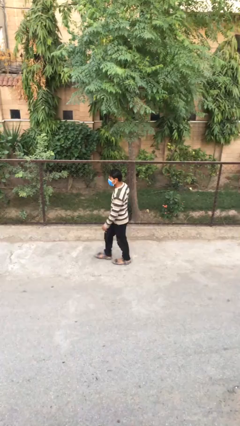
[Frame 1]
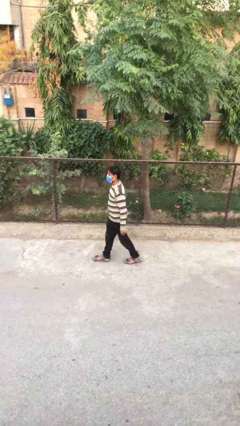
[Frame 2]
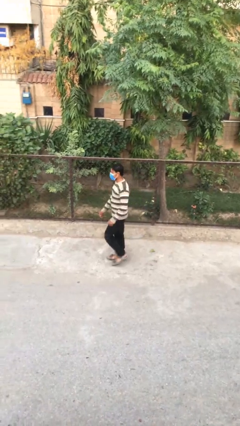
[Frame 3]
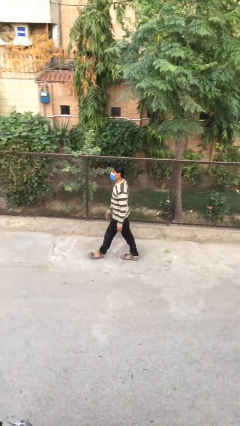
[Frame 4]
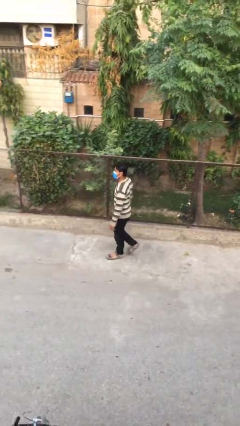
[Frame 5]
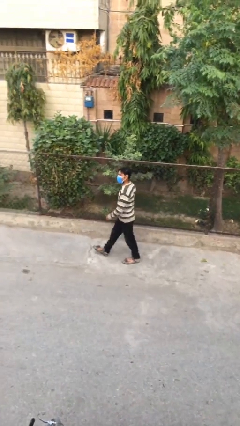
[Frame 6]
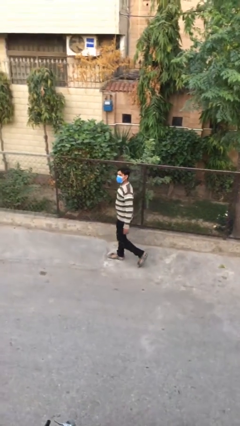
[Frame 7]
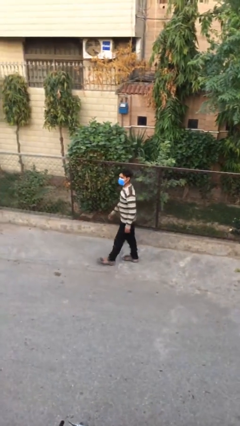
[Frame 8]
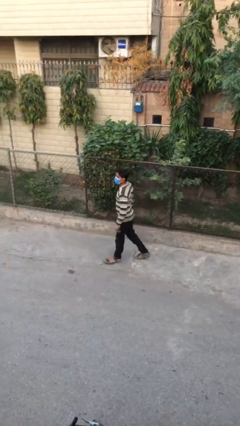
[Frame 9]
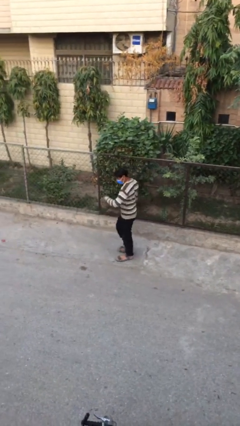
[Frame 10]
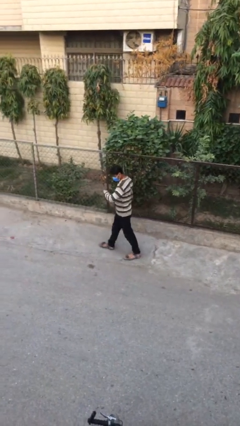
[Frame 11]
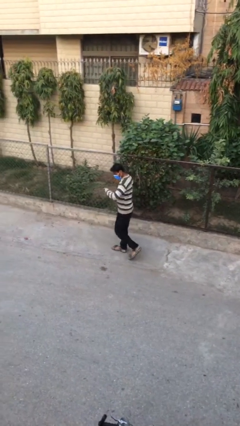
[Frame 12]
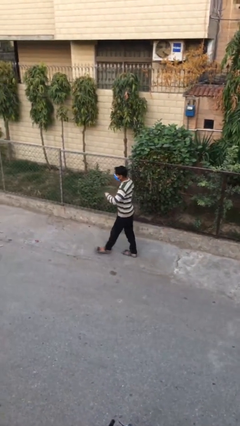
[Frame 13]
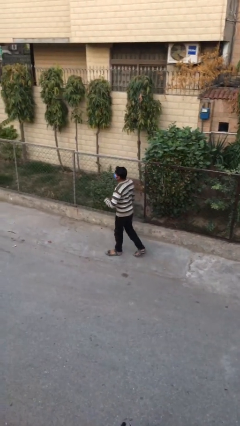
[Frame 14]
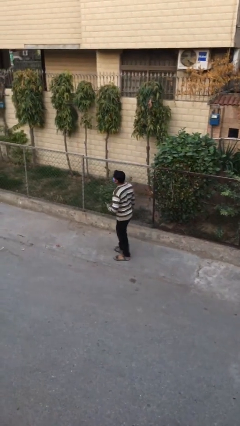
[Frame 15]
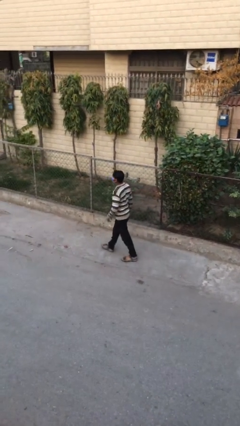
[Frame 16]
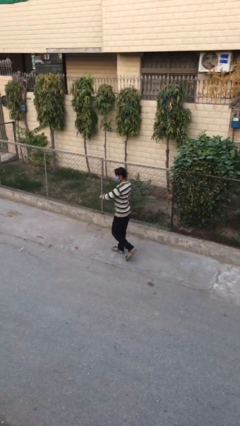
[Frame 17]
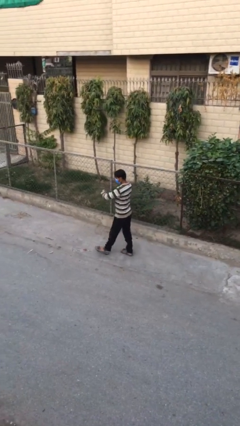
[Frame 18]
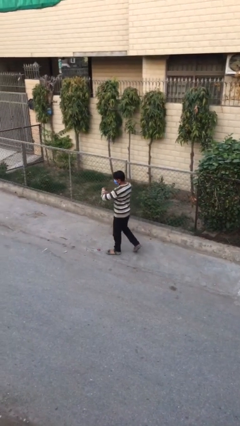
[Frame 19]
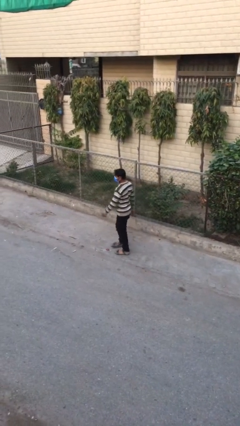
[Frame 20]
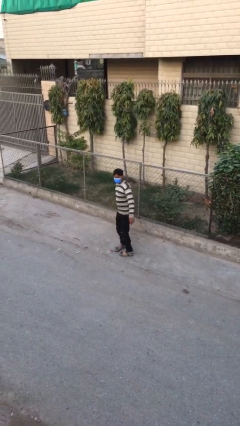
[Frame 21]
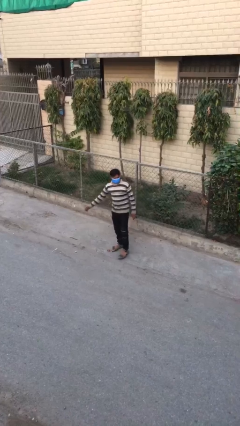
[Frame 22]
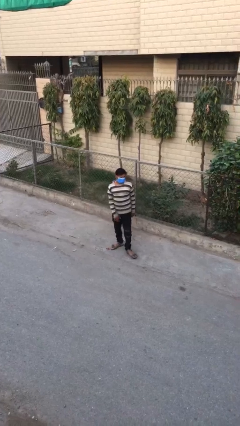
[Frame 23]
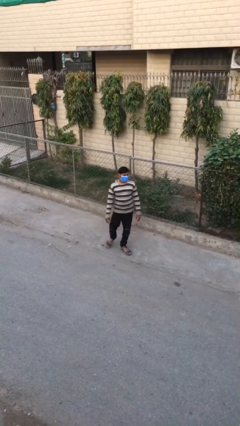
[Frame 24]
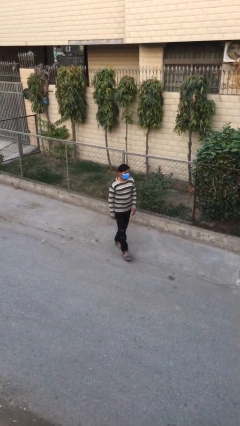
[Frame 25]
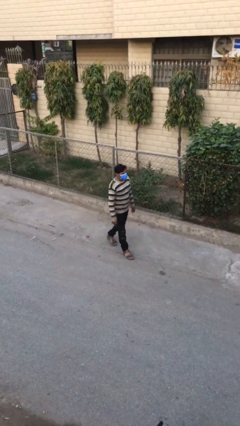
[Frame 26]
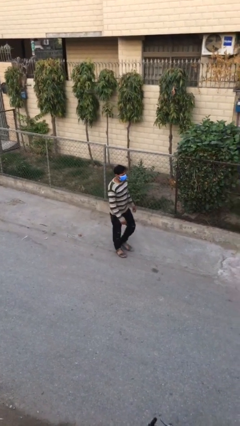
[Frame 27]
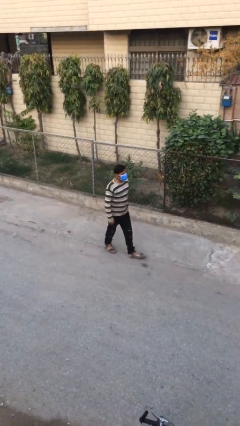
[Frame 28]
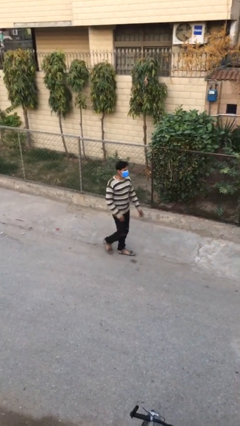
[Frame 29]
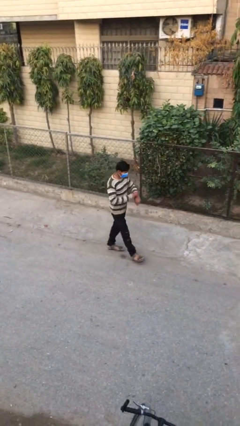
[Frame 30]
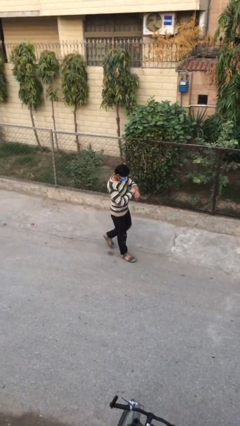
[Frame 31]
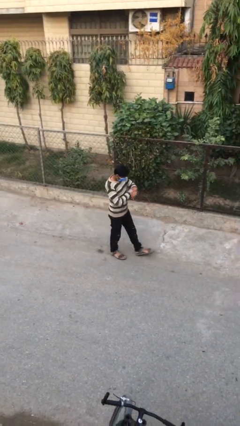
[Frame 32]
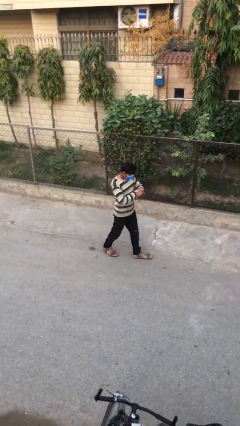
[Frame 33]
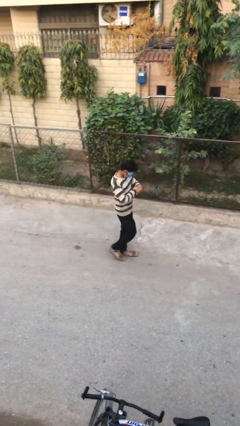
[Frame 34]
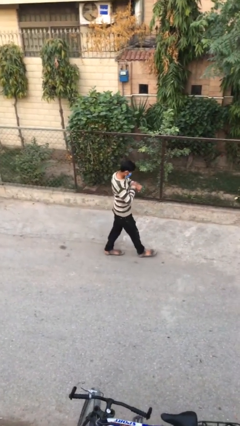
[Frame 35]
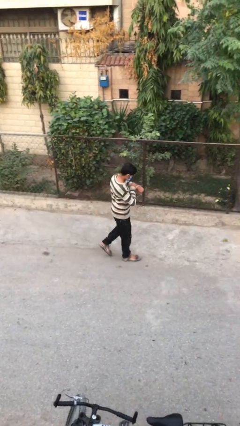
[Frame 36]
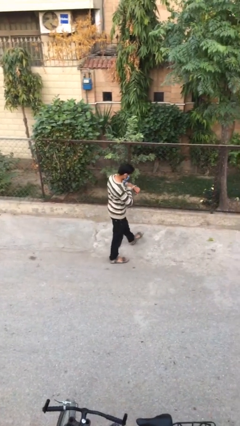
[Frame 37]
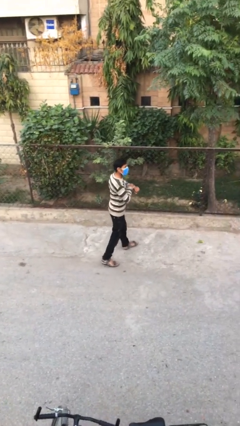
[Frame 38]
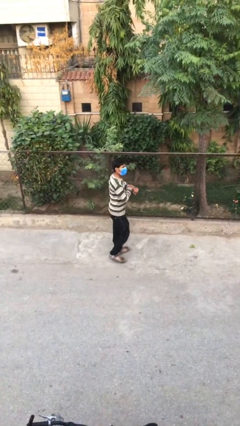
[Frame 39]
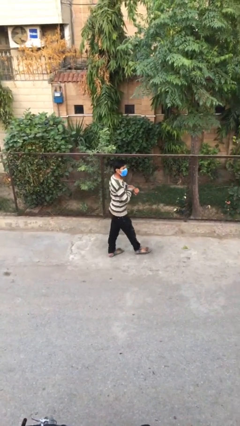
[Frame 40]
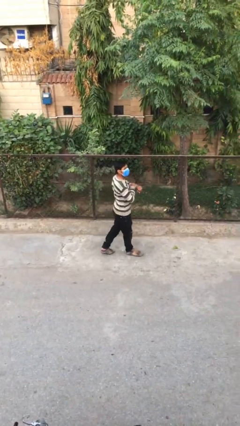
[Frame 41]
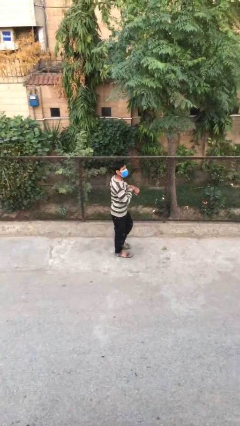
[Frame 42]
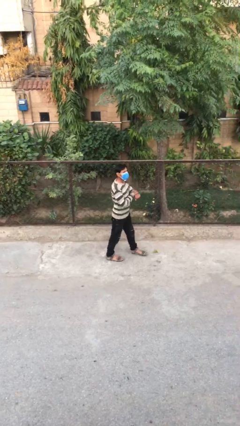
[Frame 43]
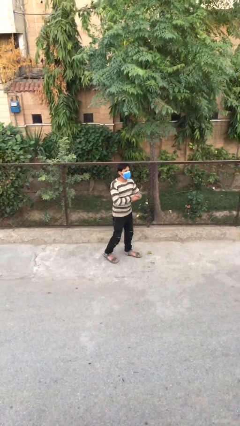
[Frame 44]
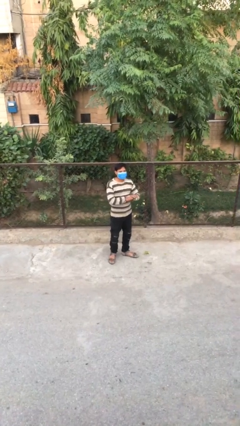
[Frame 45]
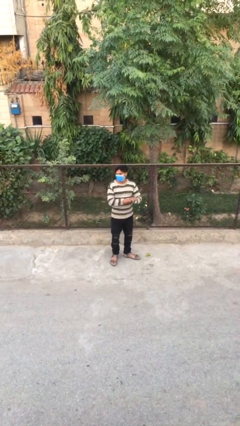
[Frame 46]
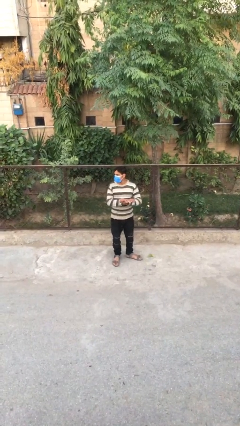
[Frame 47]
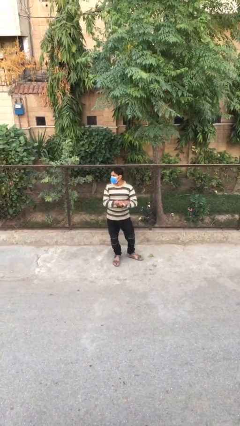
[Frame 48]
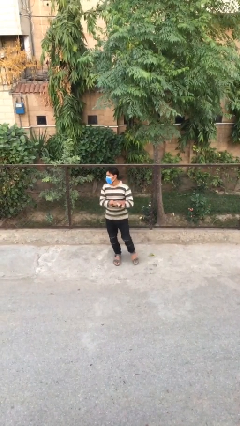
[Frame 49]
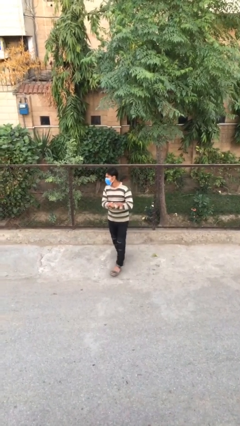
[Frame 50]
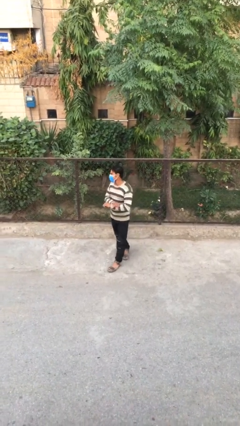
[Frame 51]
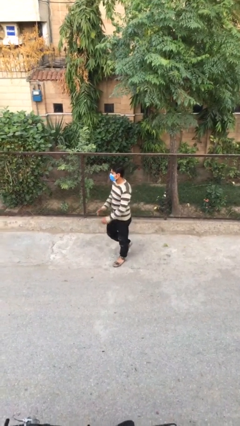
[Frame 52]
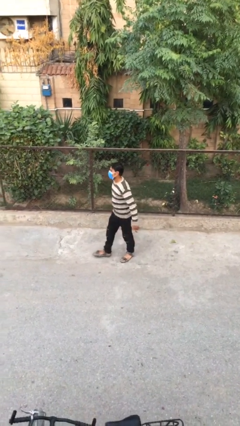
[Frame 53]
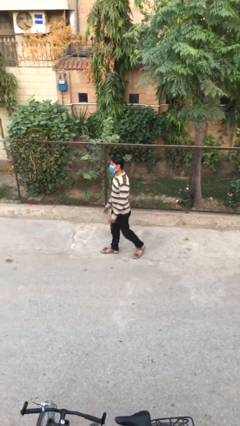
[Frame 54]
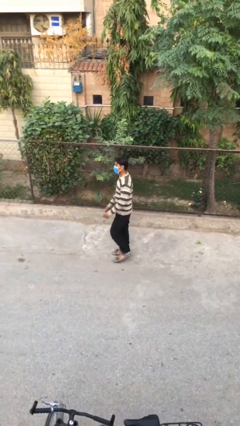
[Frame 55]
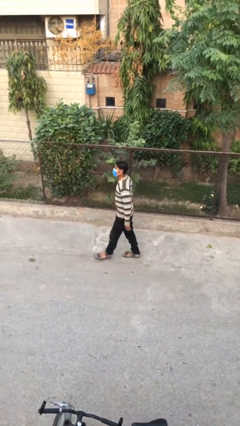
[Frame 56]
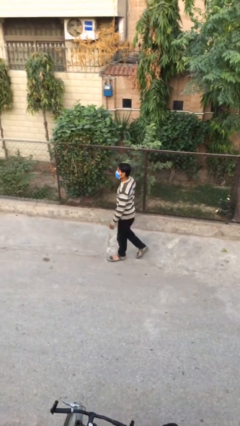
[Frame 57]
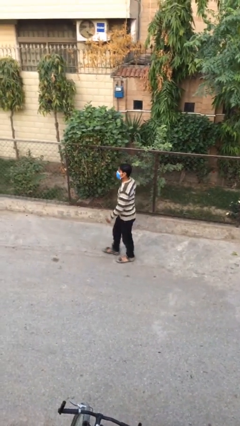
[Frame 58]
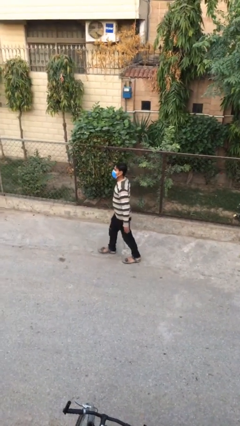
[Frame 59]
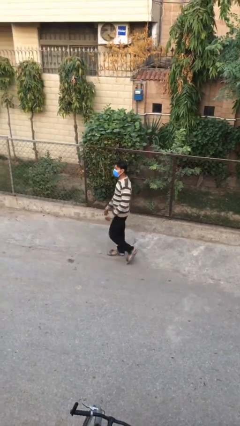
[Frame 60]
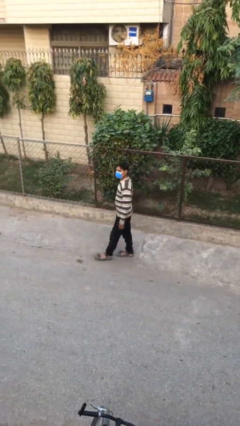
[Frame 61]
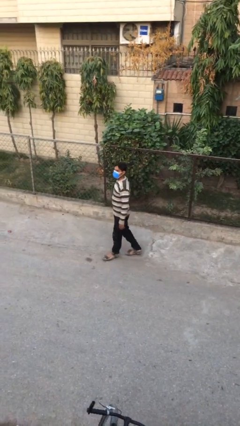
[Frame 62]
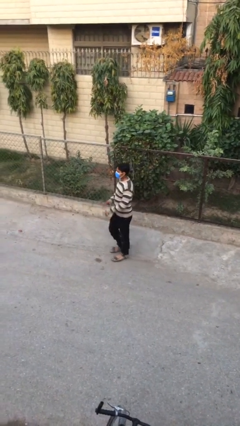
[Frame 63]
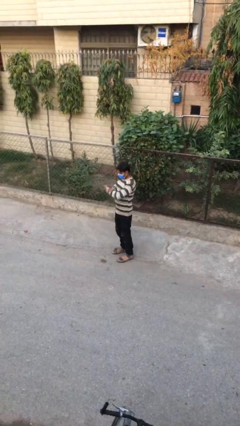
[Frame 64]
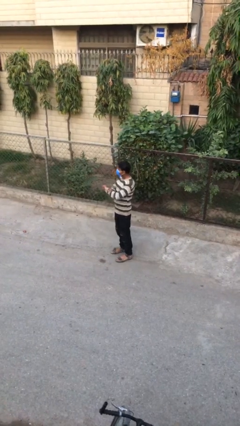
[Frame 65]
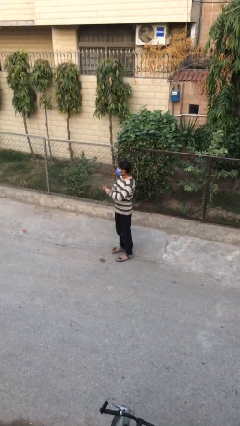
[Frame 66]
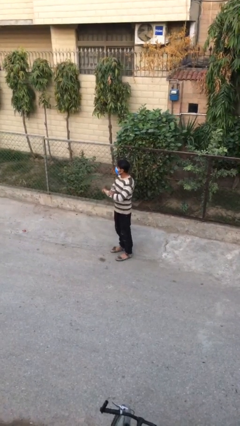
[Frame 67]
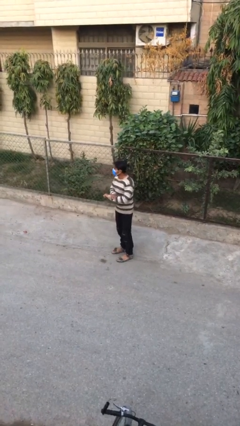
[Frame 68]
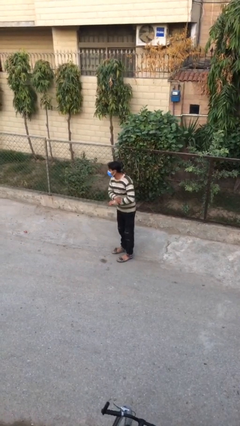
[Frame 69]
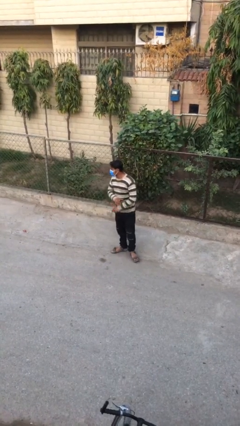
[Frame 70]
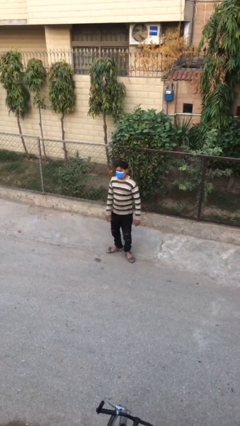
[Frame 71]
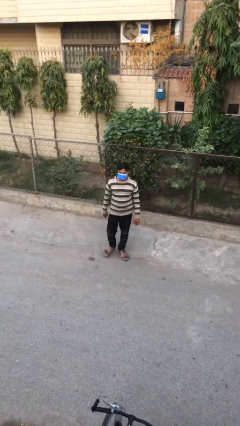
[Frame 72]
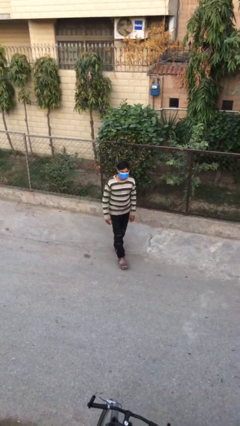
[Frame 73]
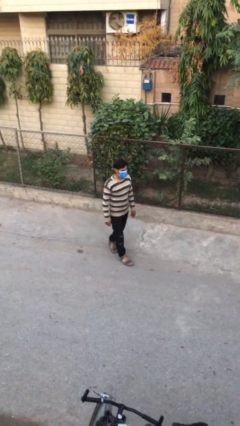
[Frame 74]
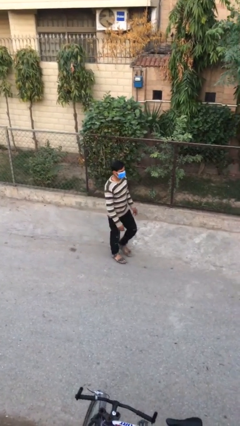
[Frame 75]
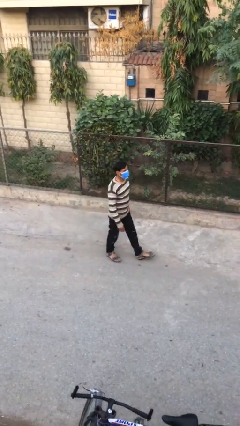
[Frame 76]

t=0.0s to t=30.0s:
person walks

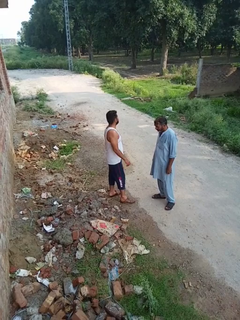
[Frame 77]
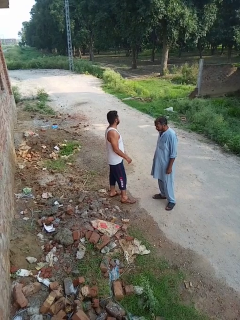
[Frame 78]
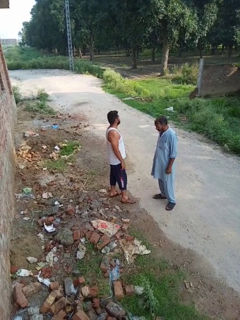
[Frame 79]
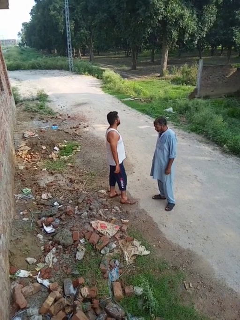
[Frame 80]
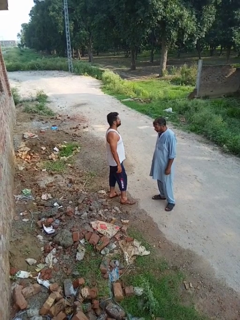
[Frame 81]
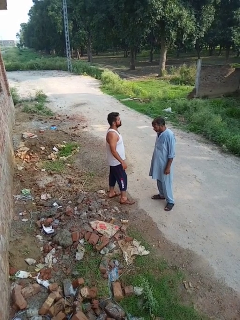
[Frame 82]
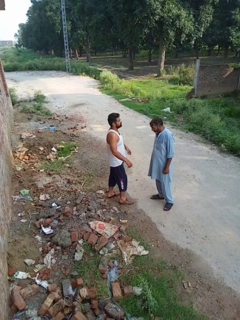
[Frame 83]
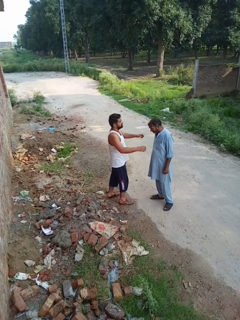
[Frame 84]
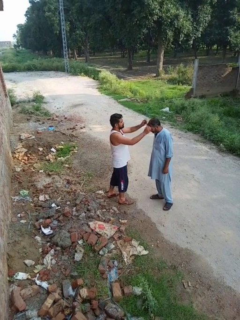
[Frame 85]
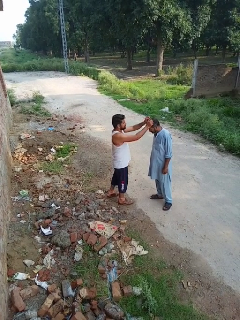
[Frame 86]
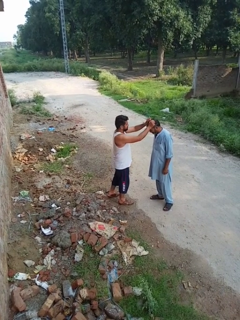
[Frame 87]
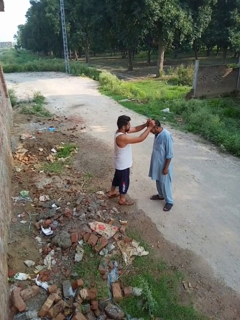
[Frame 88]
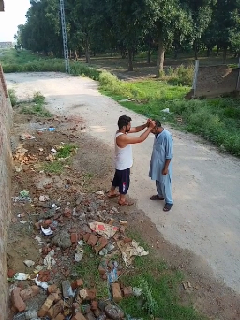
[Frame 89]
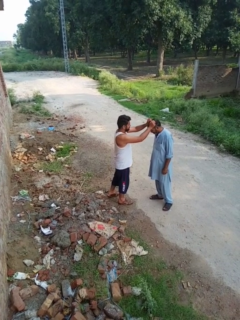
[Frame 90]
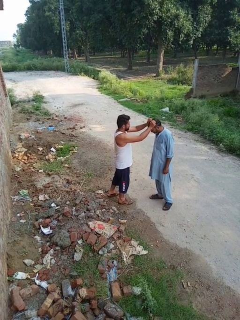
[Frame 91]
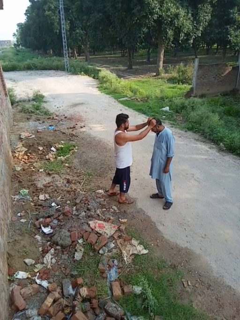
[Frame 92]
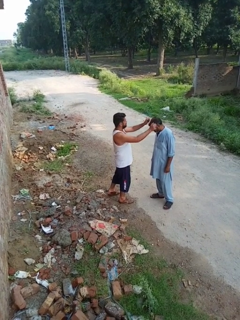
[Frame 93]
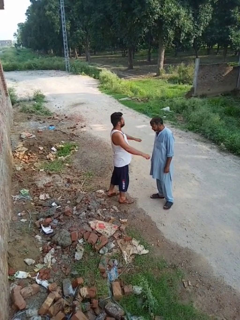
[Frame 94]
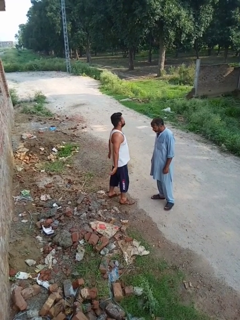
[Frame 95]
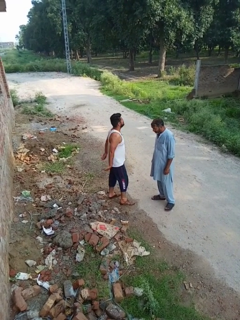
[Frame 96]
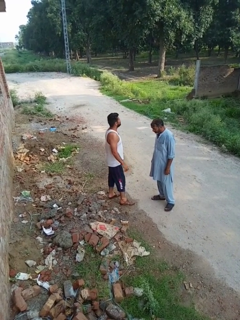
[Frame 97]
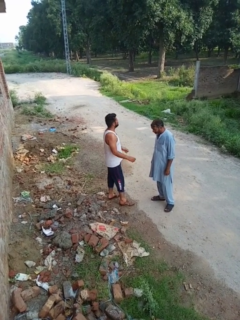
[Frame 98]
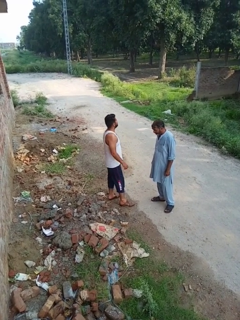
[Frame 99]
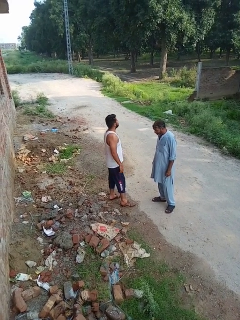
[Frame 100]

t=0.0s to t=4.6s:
person grabs person by hair

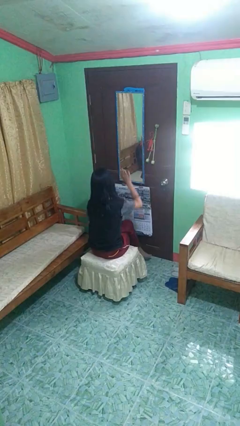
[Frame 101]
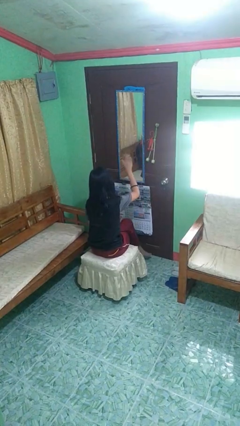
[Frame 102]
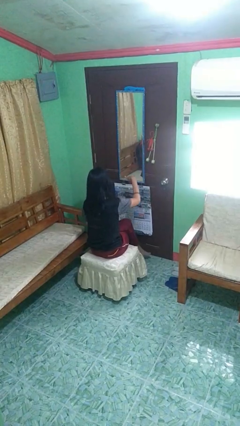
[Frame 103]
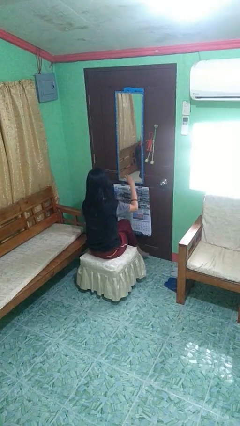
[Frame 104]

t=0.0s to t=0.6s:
person gestures come here
